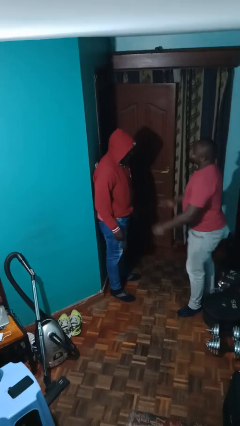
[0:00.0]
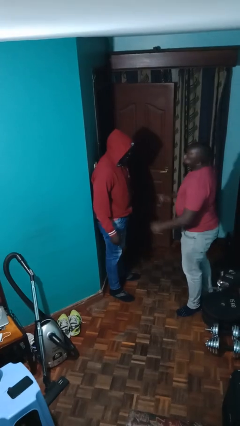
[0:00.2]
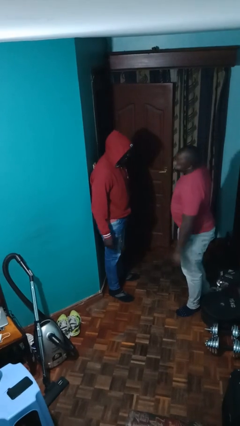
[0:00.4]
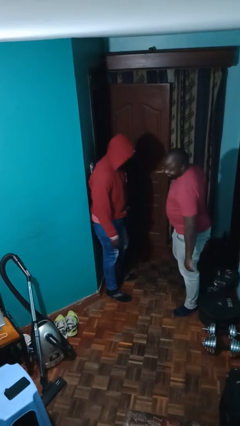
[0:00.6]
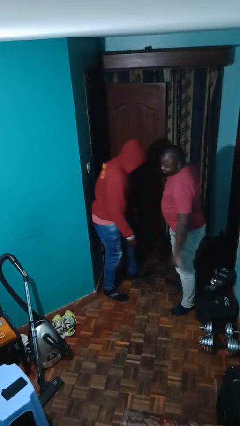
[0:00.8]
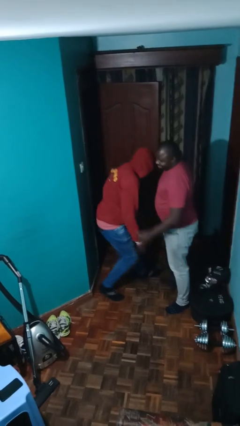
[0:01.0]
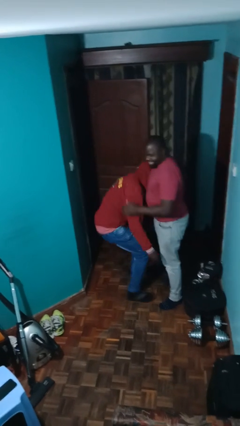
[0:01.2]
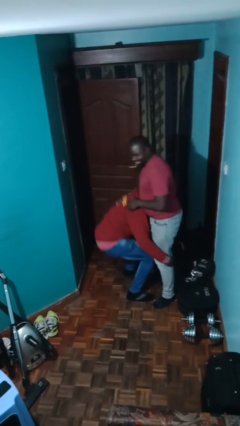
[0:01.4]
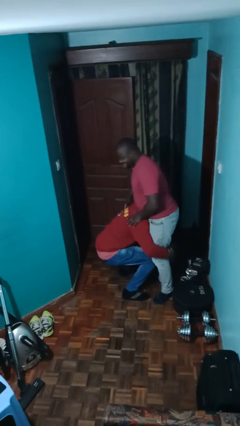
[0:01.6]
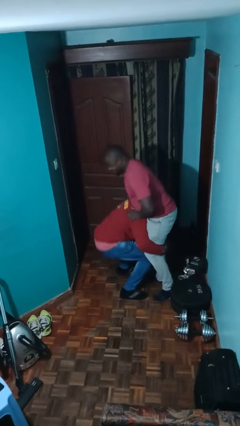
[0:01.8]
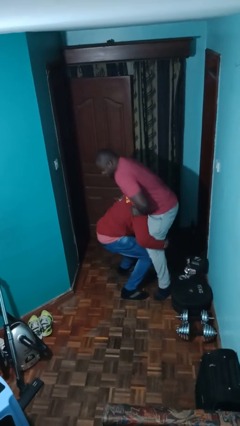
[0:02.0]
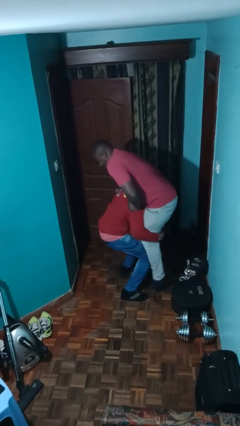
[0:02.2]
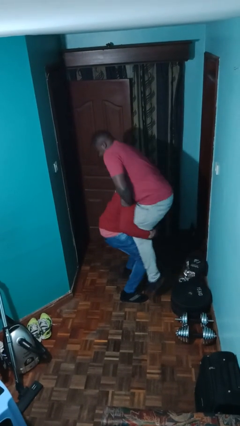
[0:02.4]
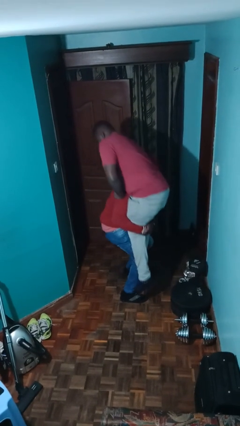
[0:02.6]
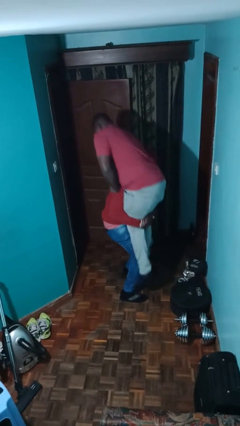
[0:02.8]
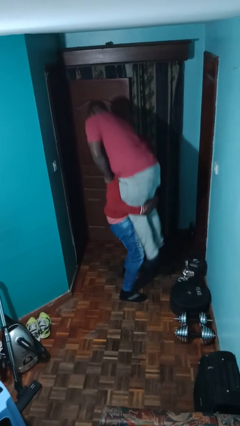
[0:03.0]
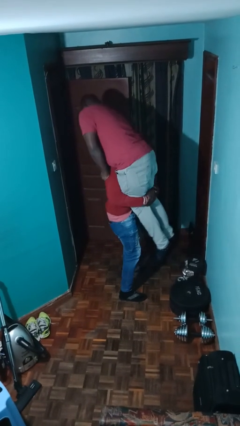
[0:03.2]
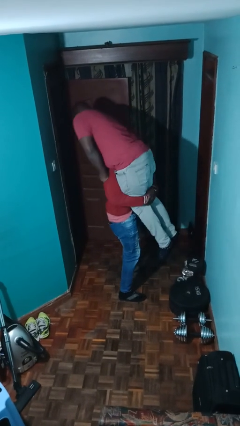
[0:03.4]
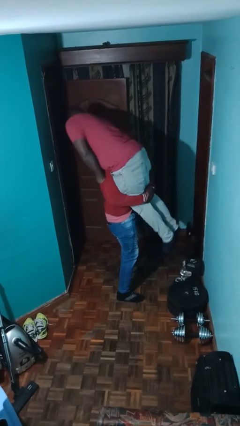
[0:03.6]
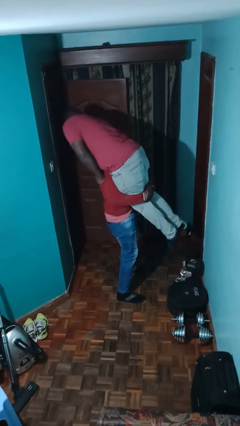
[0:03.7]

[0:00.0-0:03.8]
person picks up person

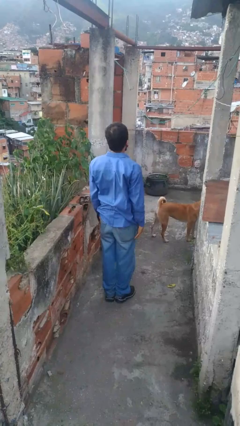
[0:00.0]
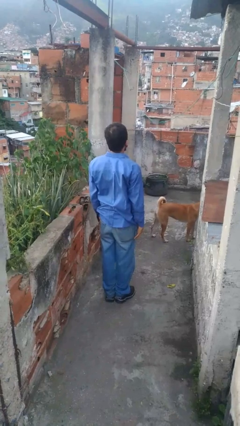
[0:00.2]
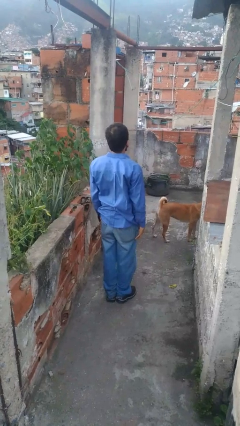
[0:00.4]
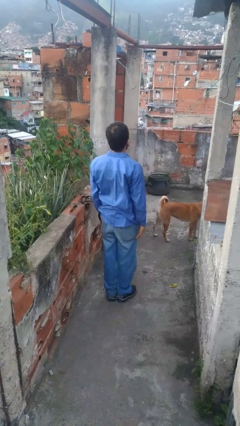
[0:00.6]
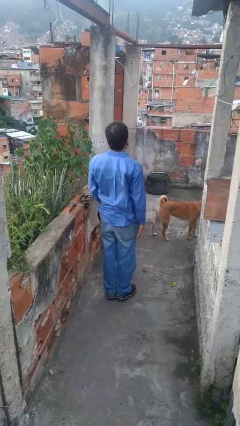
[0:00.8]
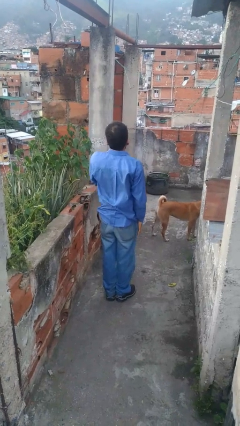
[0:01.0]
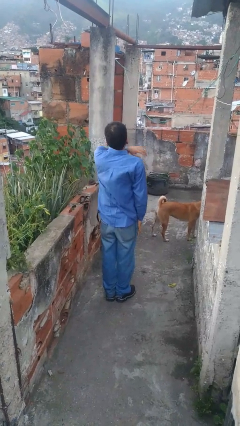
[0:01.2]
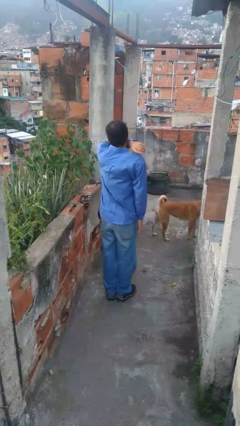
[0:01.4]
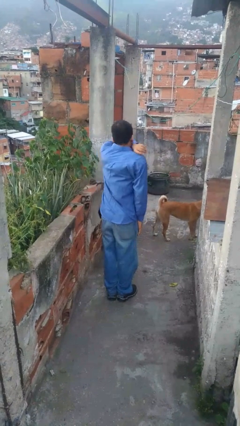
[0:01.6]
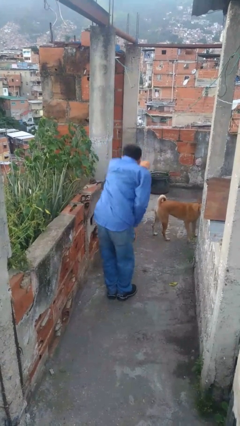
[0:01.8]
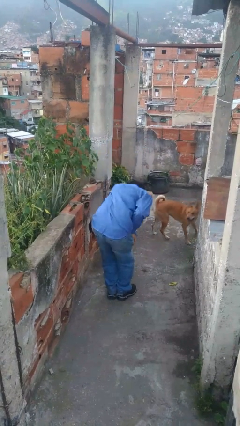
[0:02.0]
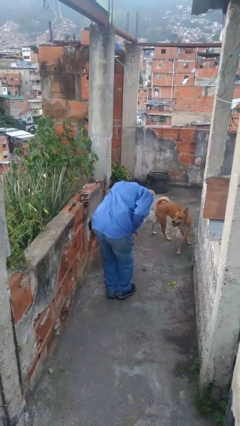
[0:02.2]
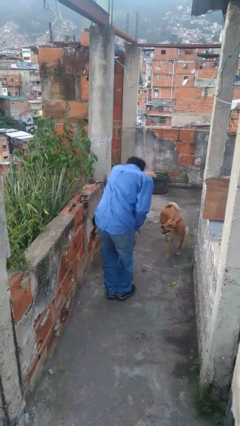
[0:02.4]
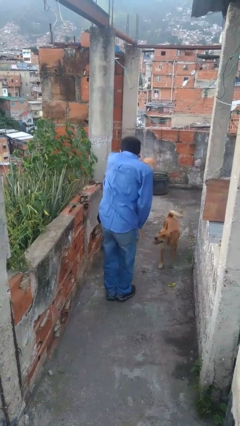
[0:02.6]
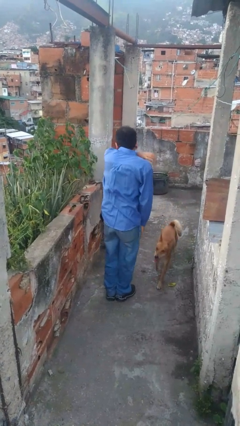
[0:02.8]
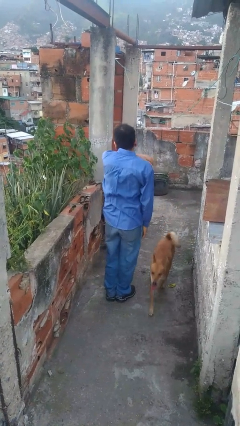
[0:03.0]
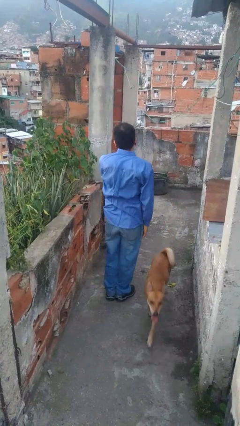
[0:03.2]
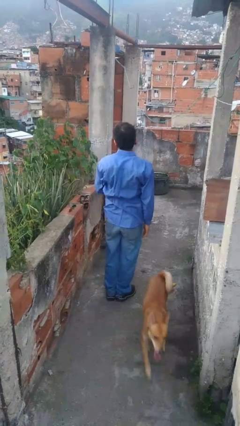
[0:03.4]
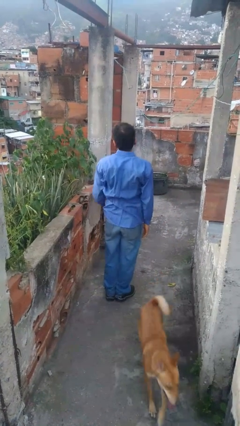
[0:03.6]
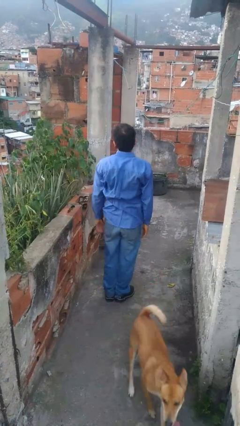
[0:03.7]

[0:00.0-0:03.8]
person sneezes into arm

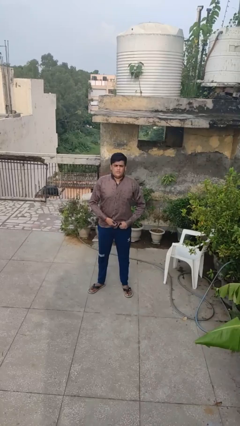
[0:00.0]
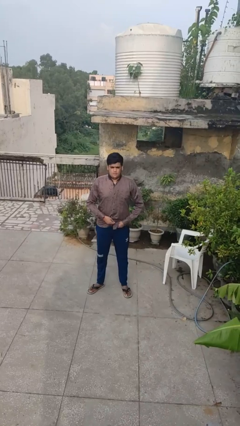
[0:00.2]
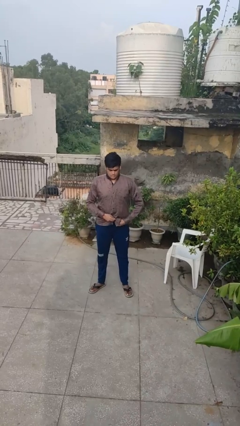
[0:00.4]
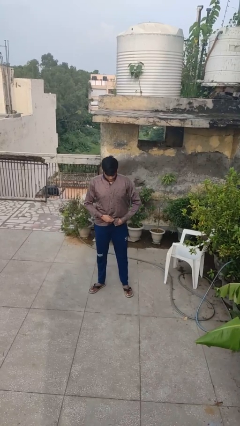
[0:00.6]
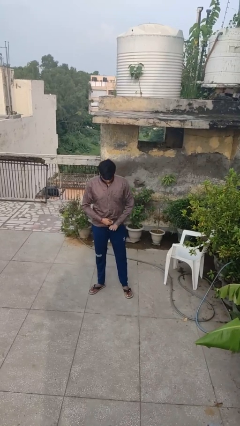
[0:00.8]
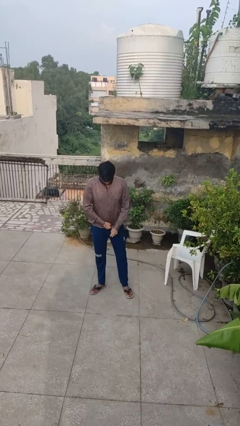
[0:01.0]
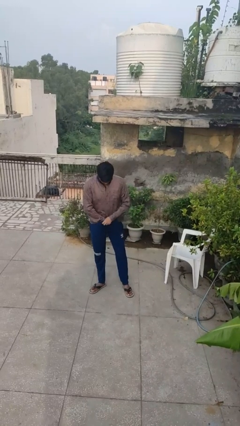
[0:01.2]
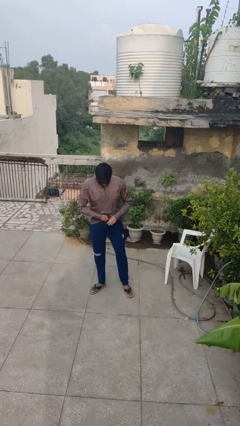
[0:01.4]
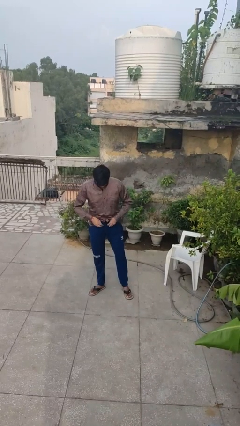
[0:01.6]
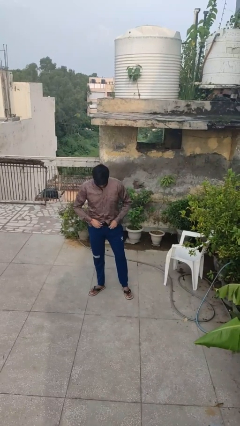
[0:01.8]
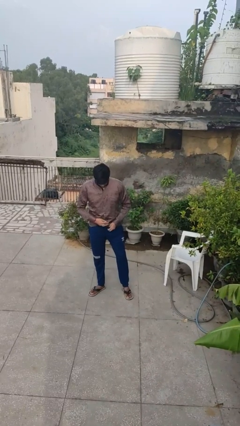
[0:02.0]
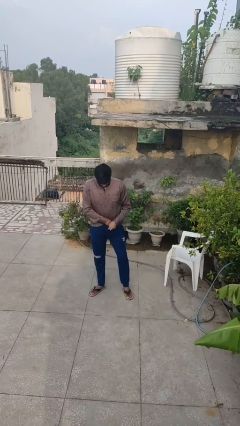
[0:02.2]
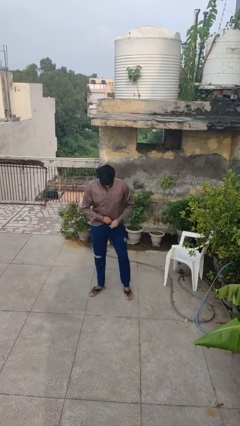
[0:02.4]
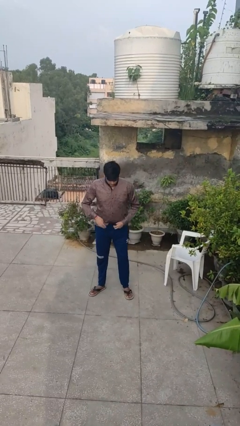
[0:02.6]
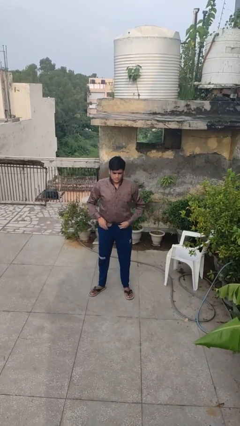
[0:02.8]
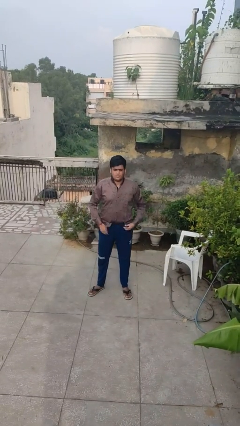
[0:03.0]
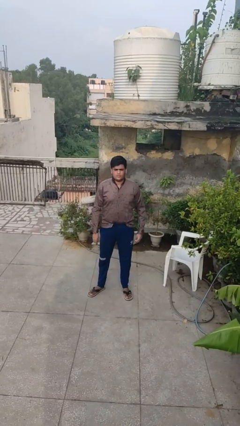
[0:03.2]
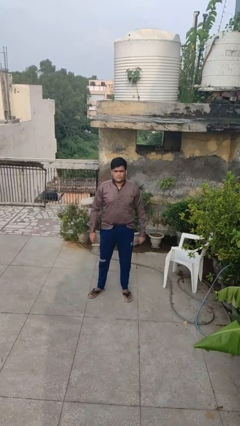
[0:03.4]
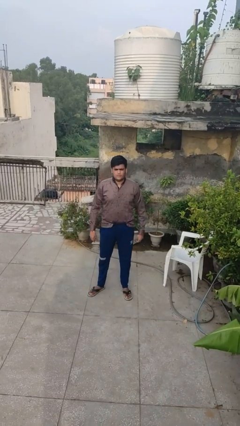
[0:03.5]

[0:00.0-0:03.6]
person tucks in shirt

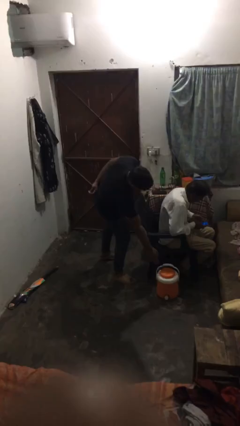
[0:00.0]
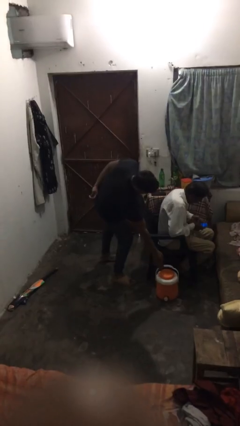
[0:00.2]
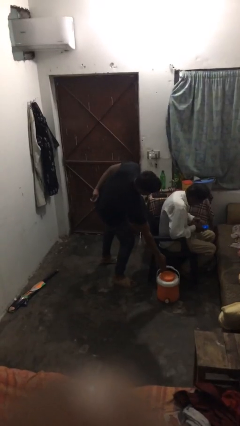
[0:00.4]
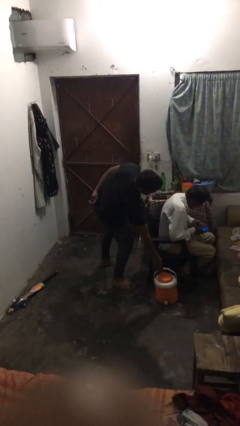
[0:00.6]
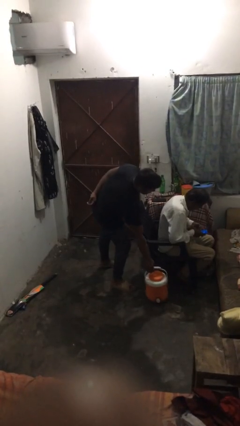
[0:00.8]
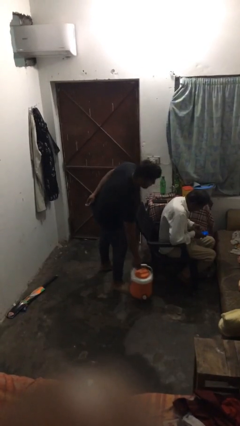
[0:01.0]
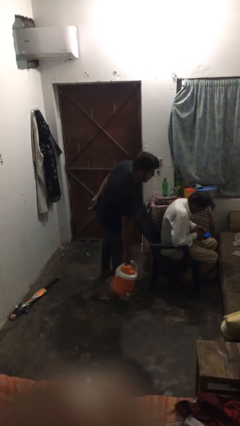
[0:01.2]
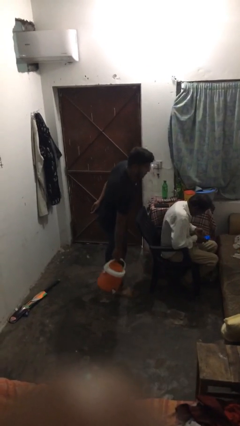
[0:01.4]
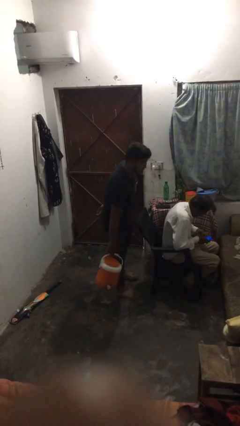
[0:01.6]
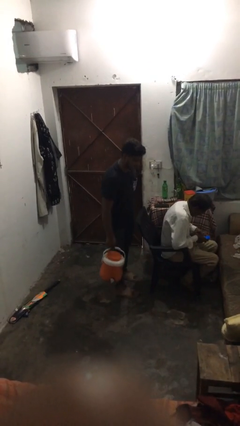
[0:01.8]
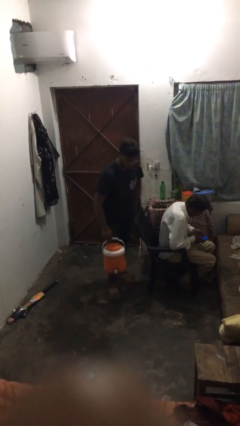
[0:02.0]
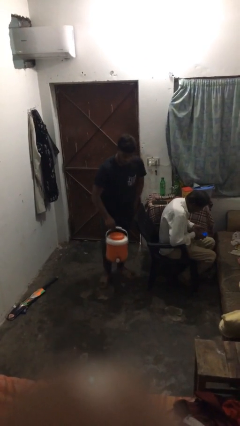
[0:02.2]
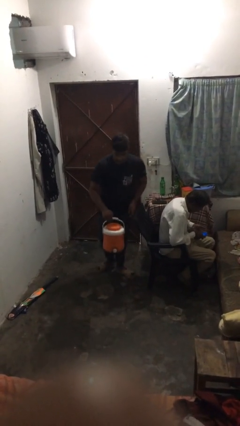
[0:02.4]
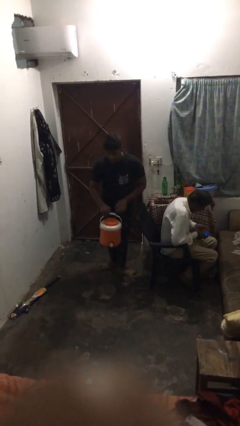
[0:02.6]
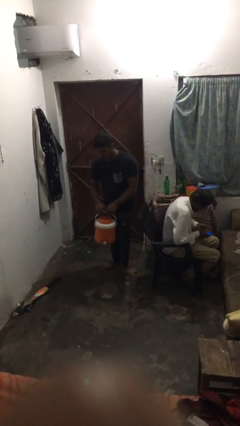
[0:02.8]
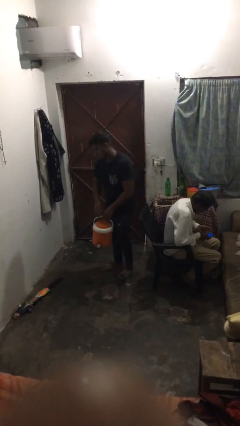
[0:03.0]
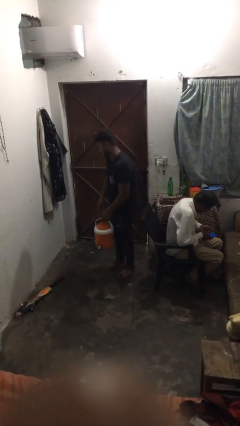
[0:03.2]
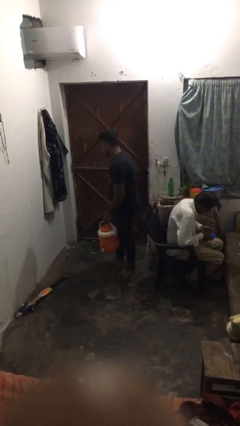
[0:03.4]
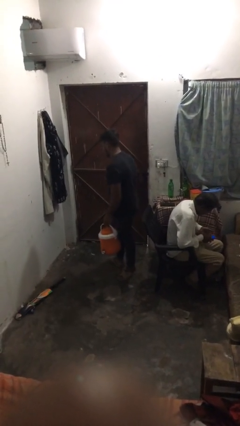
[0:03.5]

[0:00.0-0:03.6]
person steals object from person

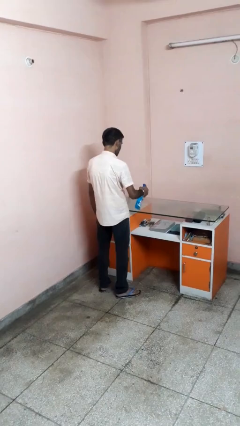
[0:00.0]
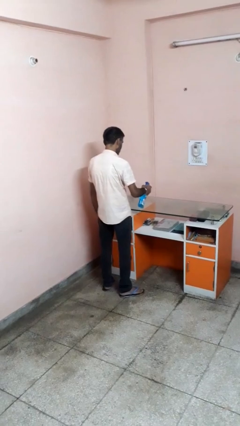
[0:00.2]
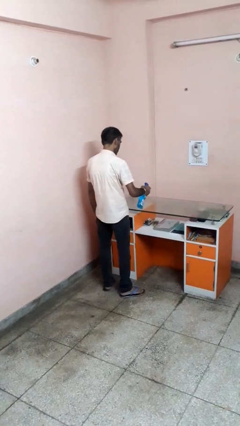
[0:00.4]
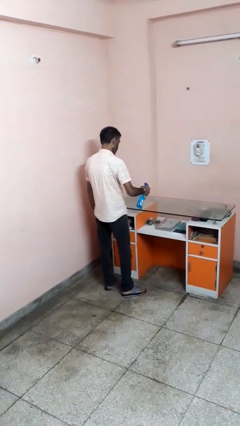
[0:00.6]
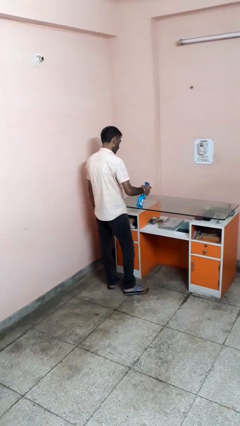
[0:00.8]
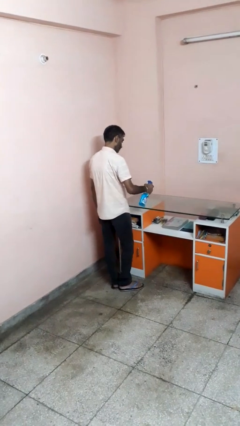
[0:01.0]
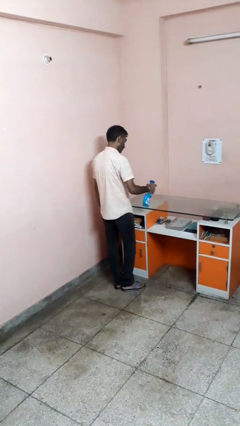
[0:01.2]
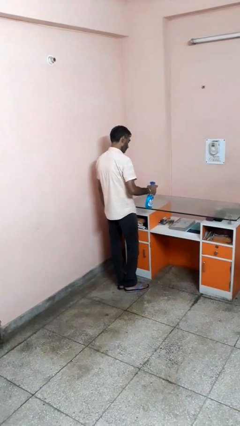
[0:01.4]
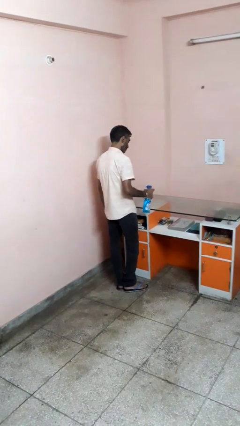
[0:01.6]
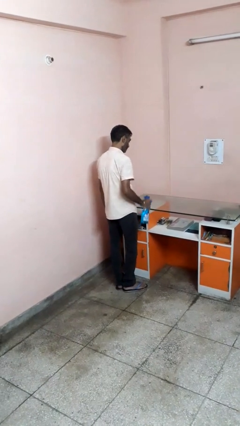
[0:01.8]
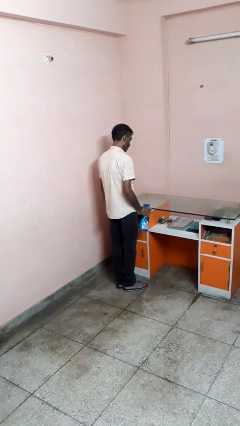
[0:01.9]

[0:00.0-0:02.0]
person sprays from bottle

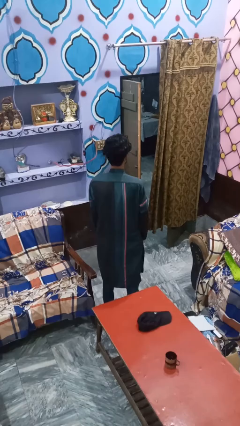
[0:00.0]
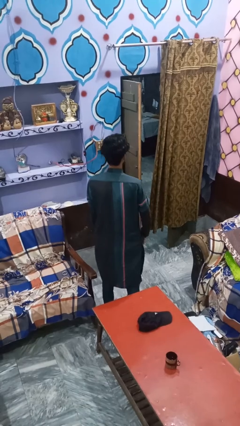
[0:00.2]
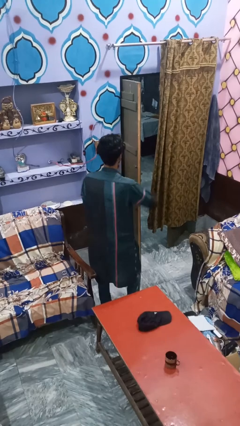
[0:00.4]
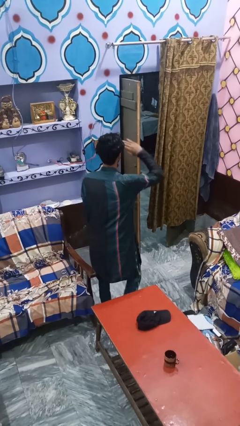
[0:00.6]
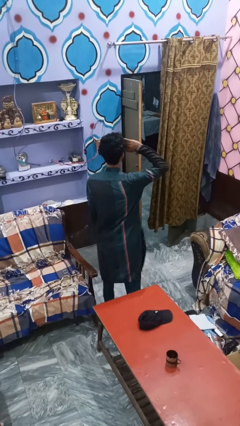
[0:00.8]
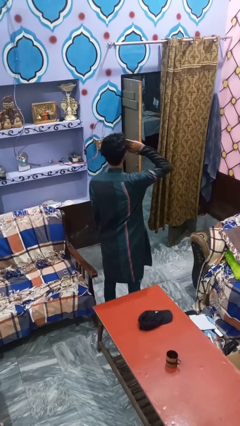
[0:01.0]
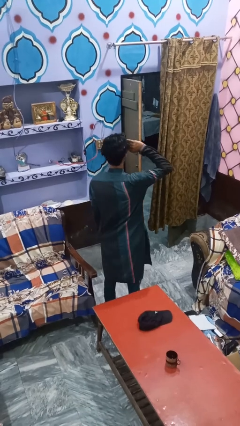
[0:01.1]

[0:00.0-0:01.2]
person salutes
